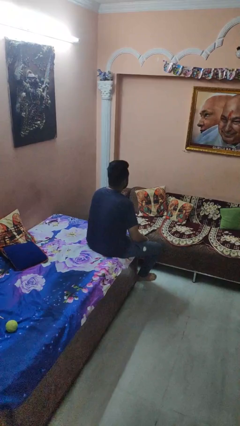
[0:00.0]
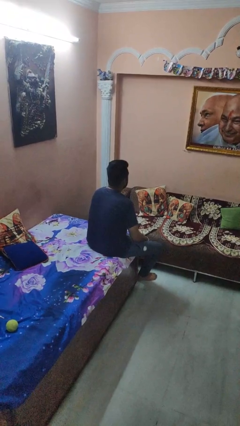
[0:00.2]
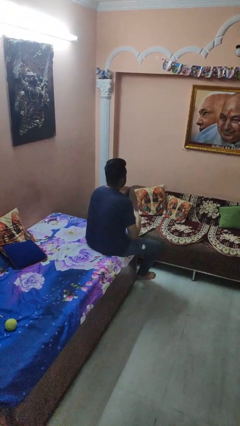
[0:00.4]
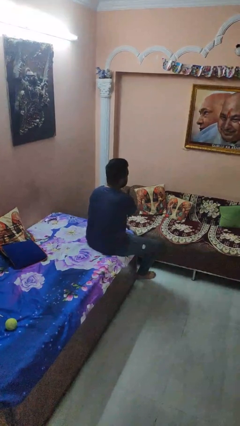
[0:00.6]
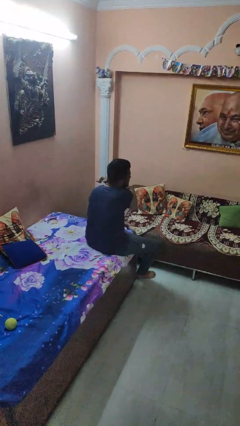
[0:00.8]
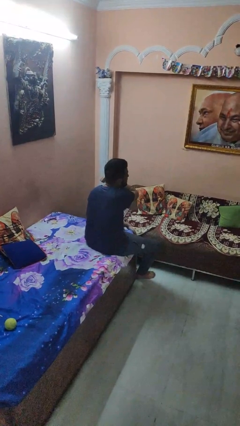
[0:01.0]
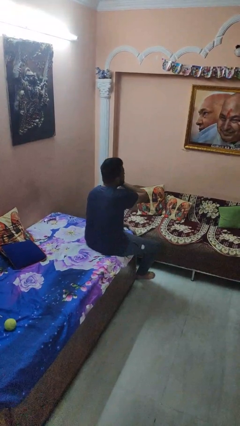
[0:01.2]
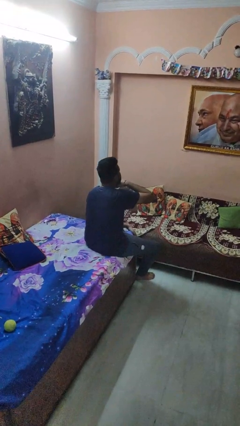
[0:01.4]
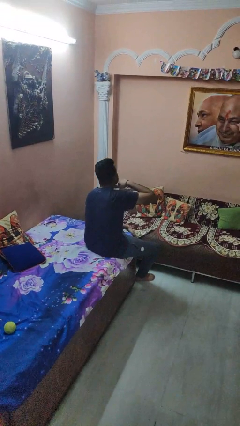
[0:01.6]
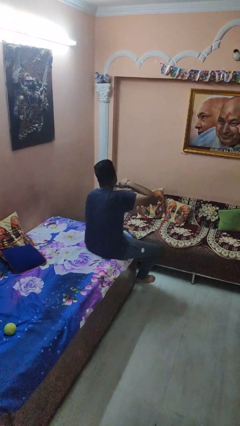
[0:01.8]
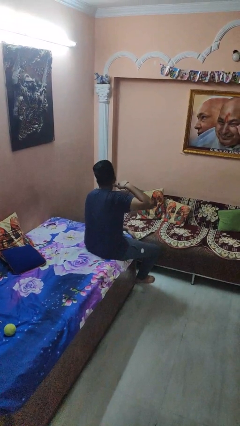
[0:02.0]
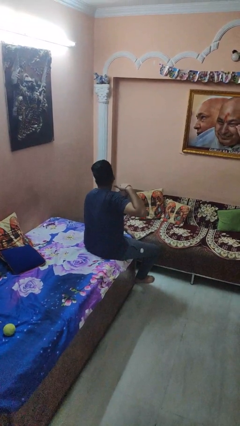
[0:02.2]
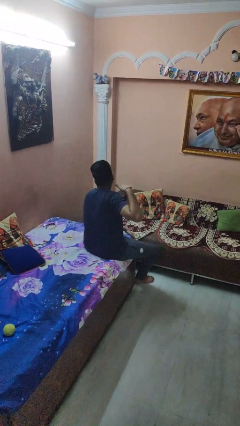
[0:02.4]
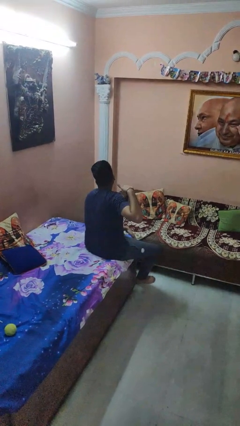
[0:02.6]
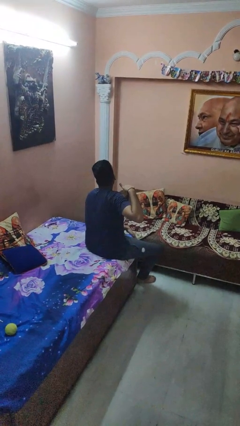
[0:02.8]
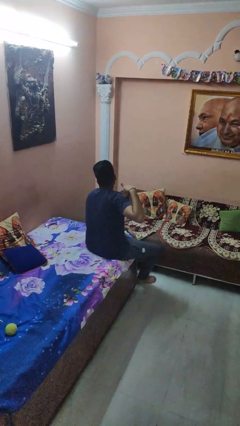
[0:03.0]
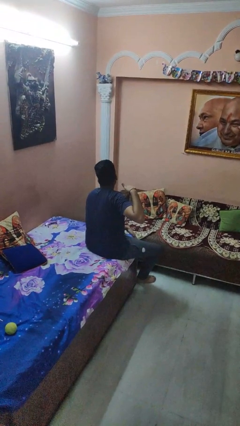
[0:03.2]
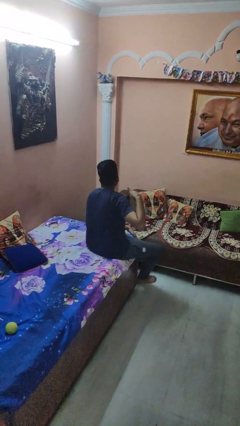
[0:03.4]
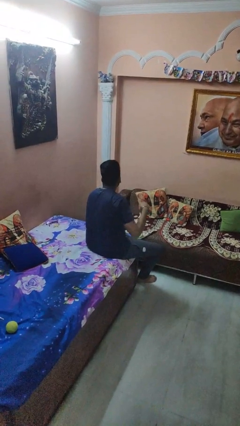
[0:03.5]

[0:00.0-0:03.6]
person gestures cut

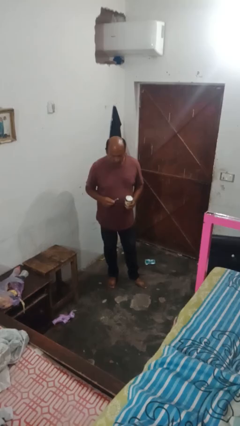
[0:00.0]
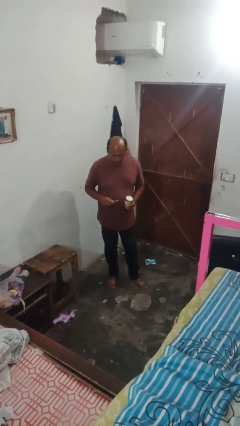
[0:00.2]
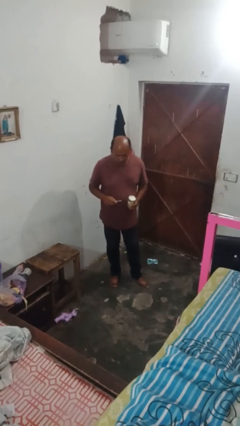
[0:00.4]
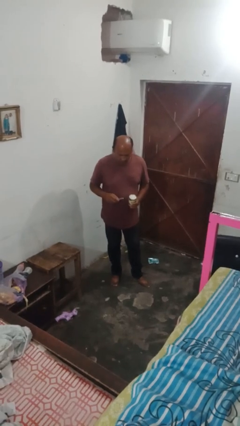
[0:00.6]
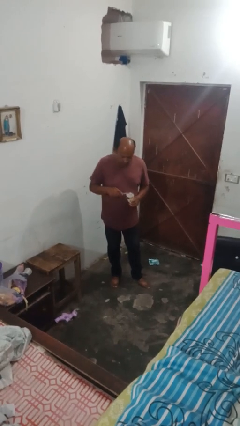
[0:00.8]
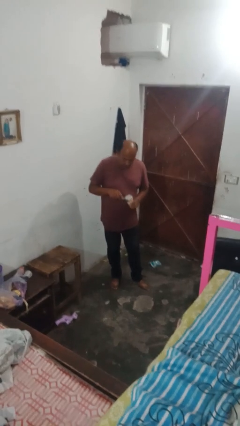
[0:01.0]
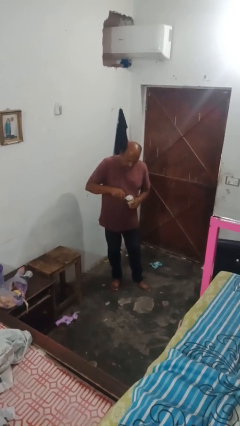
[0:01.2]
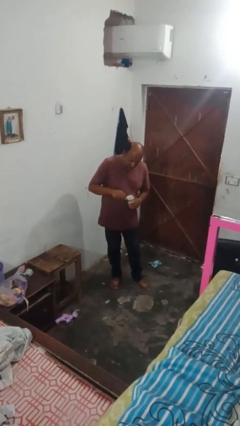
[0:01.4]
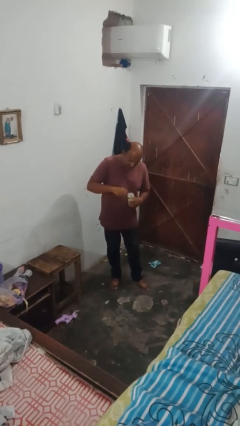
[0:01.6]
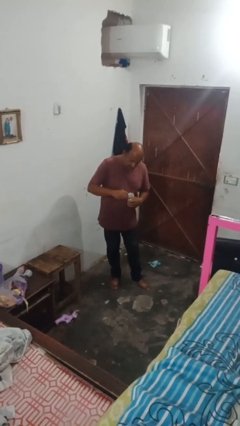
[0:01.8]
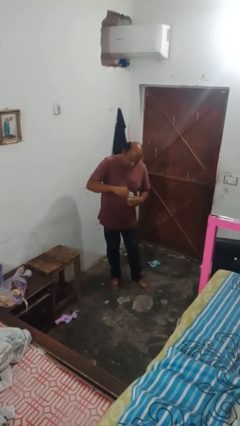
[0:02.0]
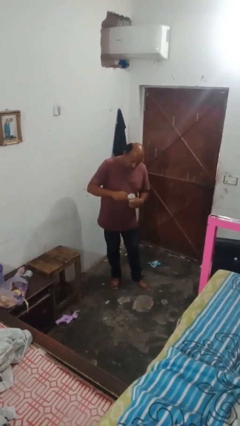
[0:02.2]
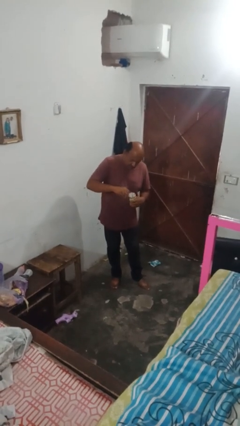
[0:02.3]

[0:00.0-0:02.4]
person opens can with can opener

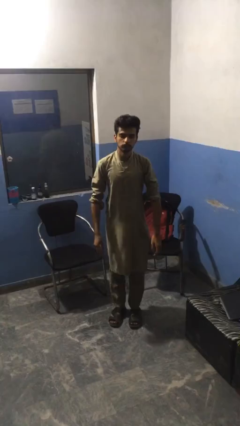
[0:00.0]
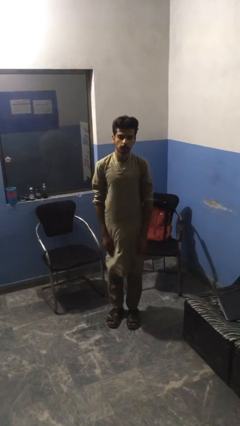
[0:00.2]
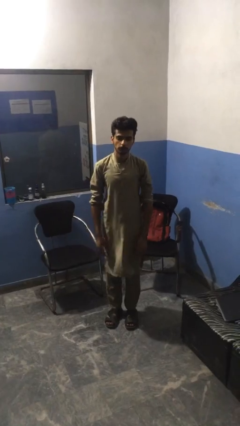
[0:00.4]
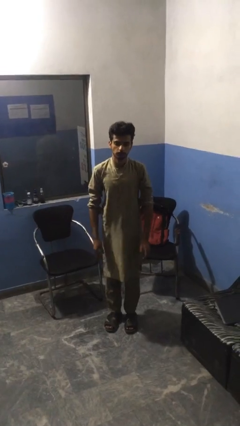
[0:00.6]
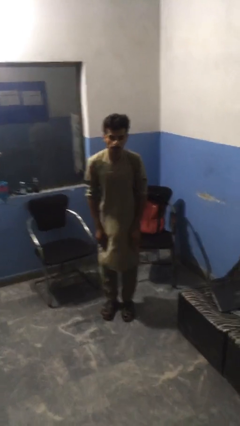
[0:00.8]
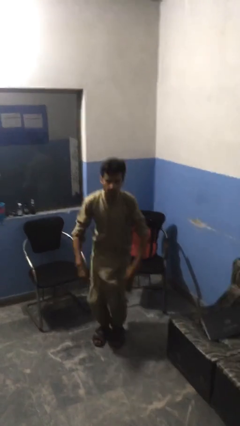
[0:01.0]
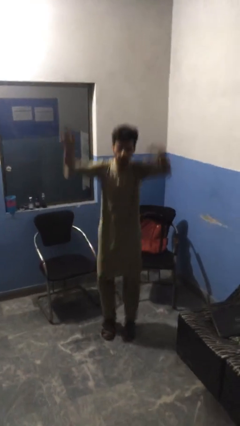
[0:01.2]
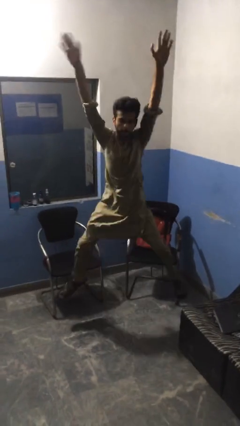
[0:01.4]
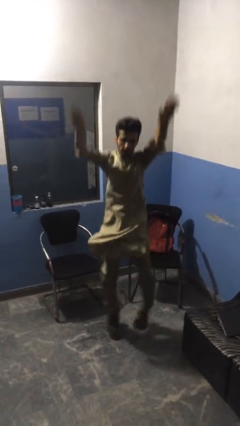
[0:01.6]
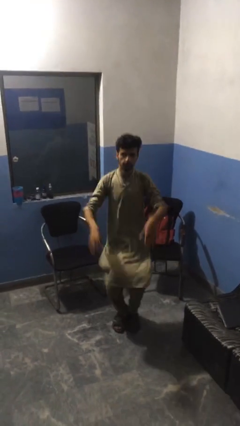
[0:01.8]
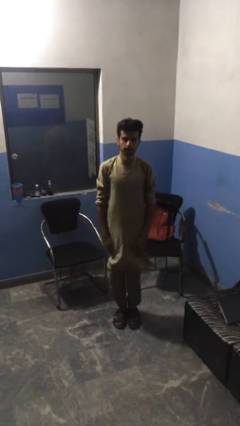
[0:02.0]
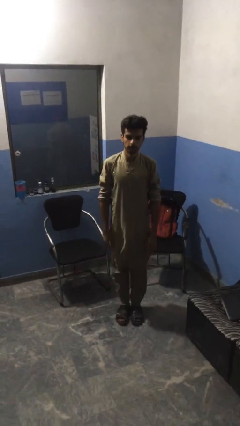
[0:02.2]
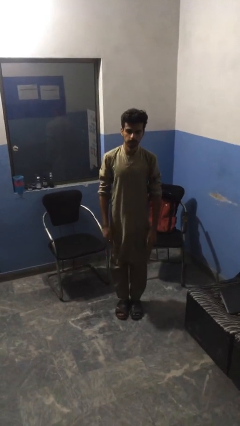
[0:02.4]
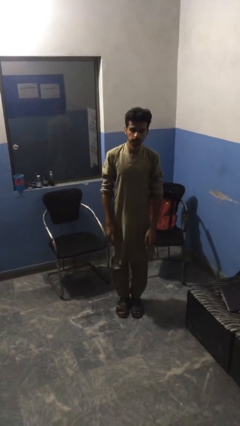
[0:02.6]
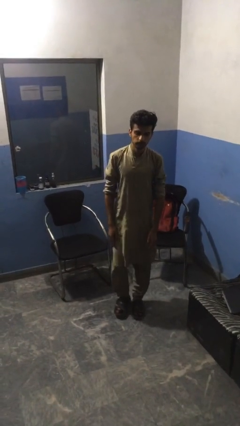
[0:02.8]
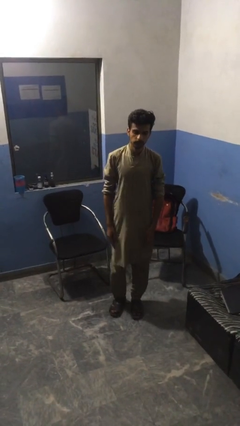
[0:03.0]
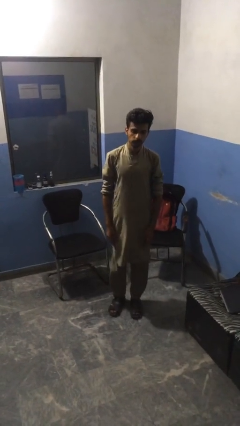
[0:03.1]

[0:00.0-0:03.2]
person exercises with jumping jacks

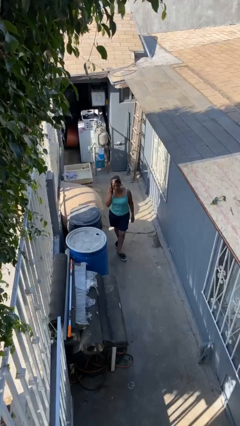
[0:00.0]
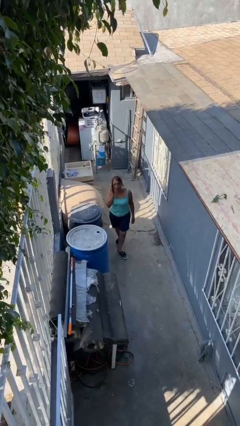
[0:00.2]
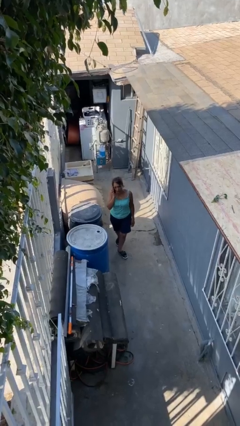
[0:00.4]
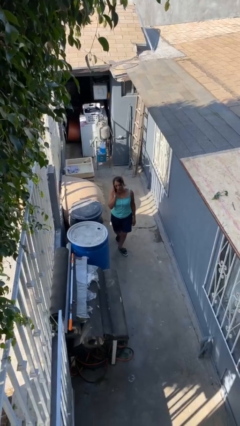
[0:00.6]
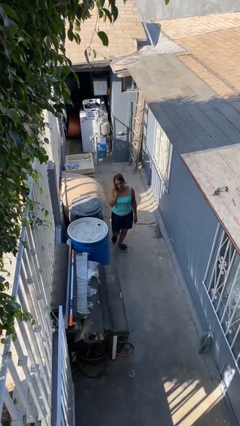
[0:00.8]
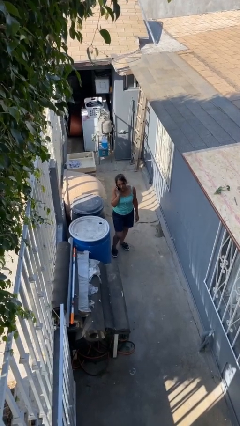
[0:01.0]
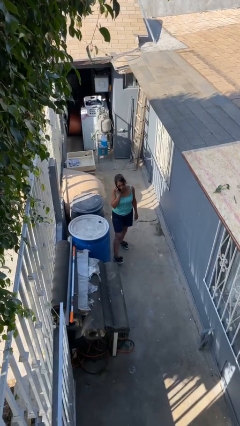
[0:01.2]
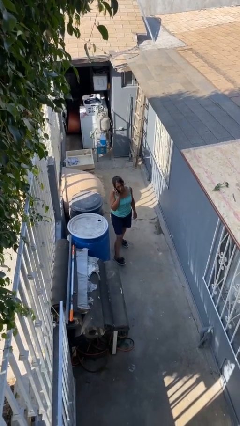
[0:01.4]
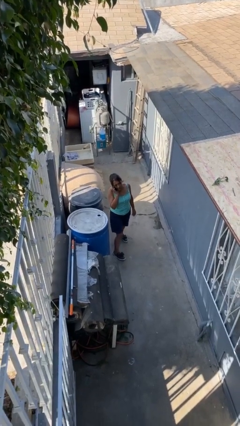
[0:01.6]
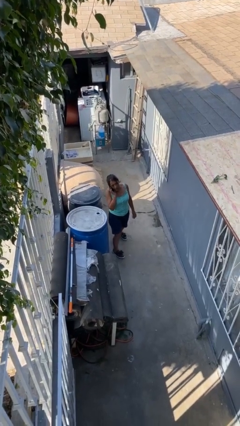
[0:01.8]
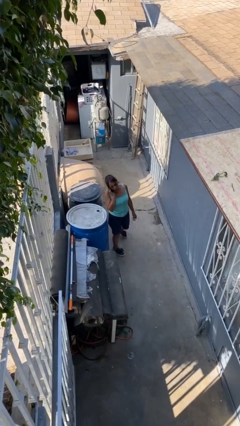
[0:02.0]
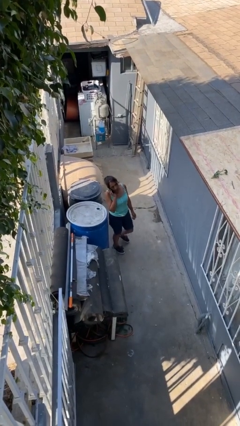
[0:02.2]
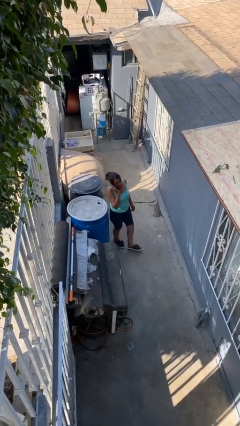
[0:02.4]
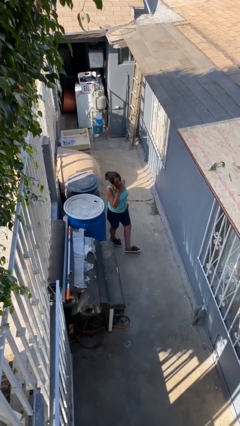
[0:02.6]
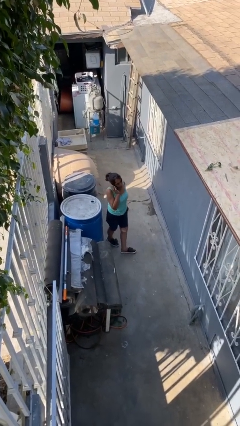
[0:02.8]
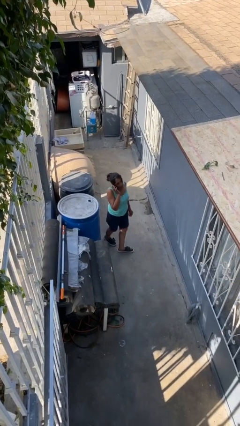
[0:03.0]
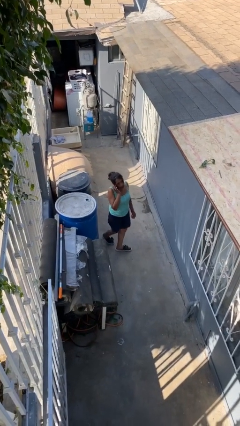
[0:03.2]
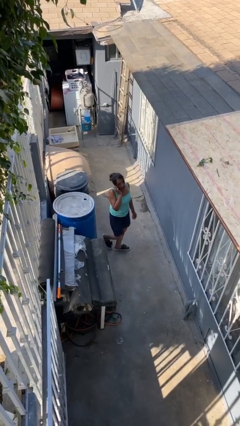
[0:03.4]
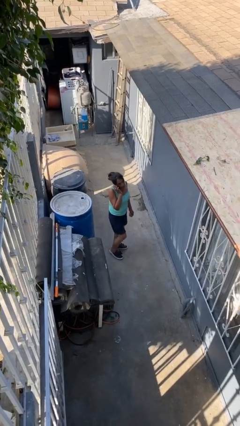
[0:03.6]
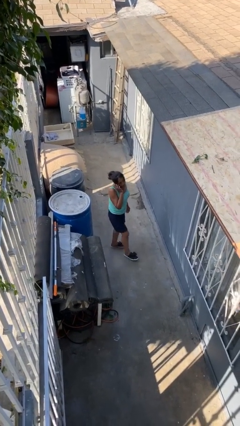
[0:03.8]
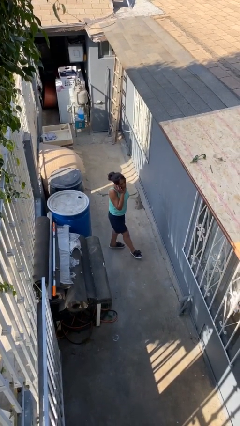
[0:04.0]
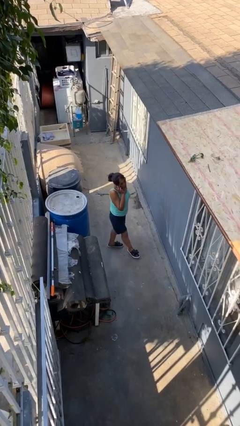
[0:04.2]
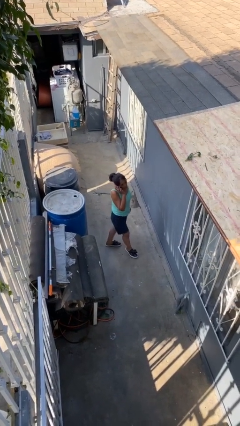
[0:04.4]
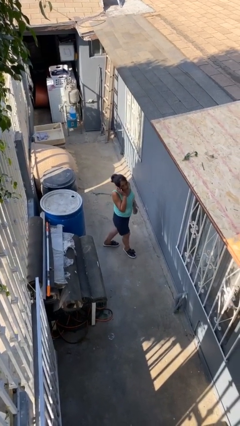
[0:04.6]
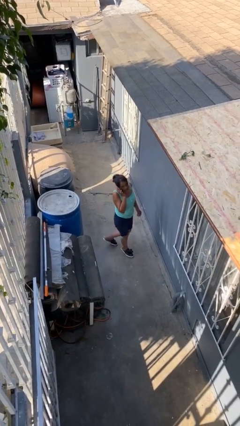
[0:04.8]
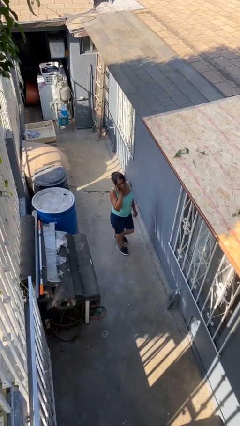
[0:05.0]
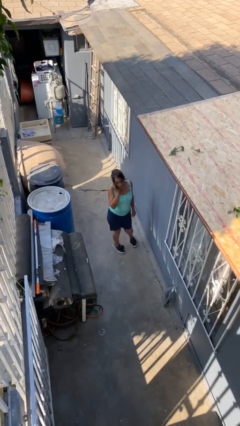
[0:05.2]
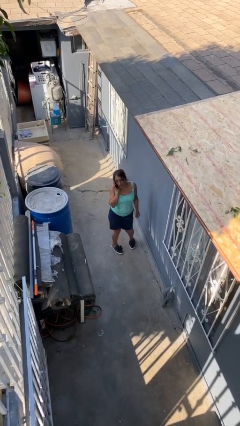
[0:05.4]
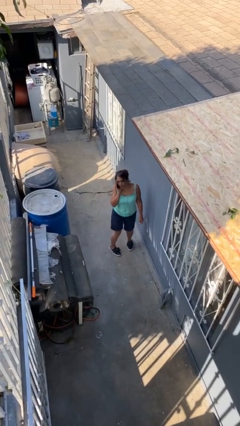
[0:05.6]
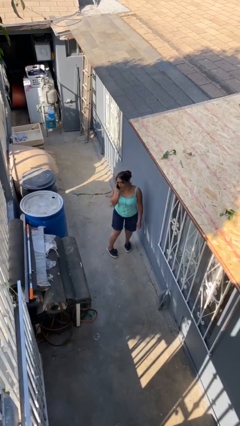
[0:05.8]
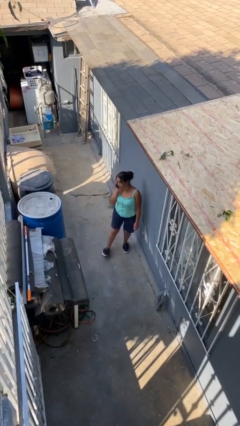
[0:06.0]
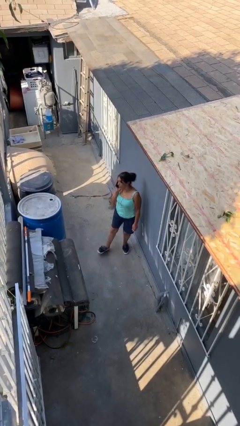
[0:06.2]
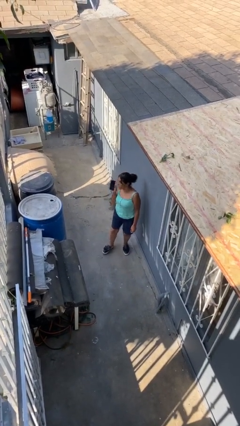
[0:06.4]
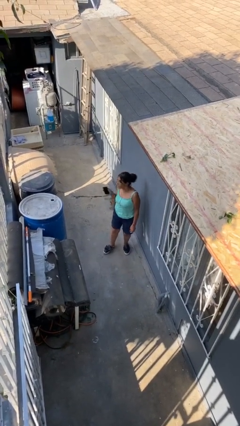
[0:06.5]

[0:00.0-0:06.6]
person talks on phone

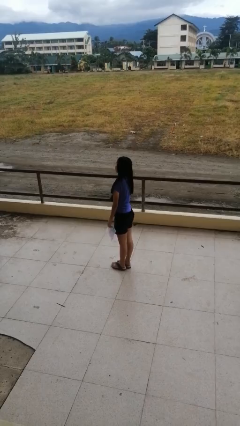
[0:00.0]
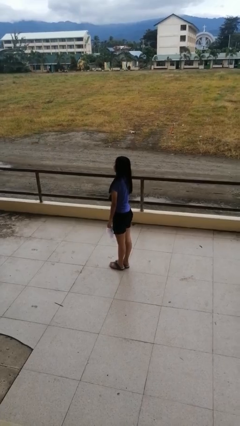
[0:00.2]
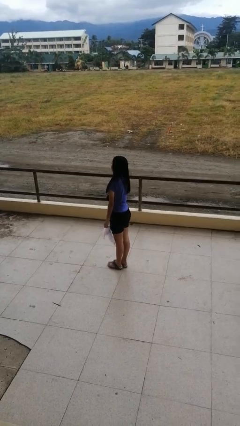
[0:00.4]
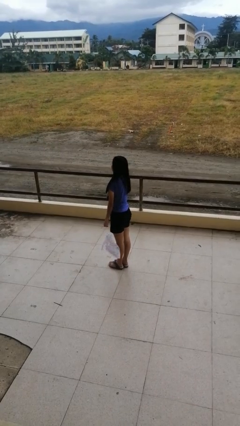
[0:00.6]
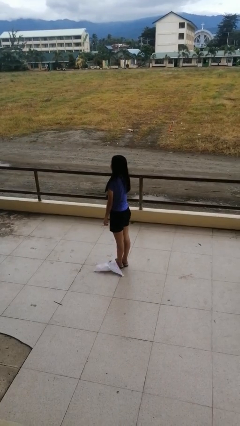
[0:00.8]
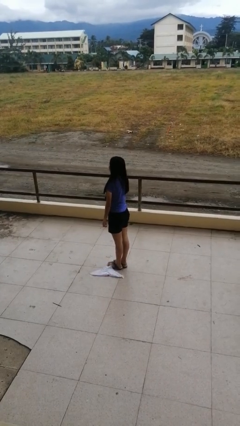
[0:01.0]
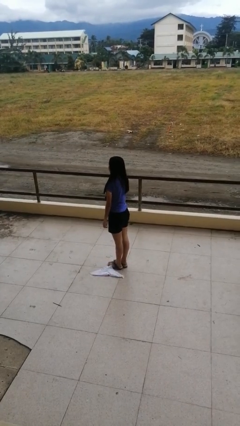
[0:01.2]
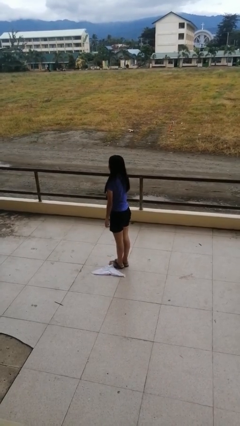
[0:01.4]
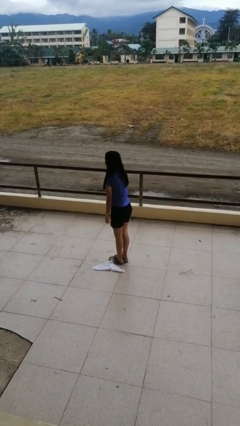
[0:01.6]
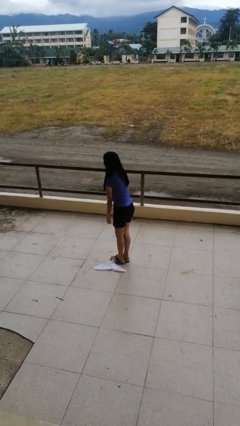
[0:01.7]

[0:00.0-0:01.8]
person drops object

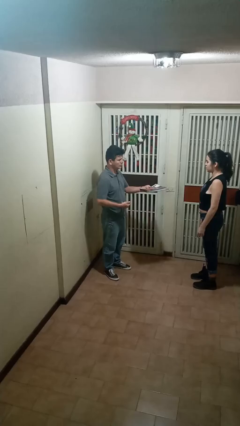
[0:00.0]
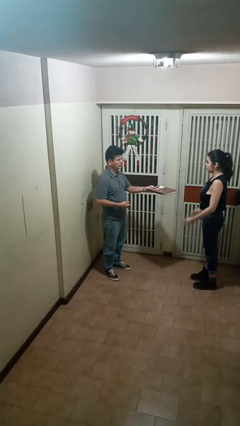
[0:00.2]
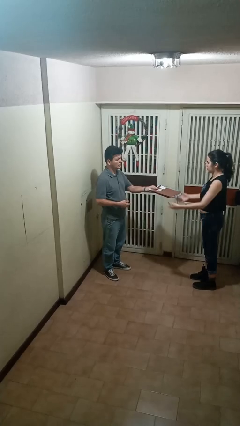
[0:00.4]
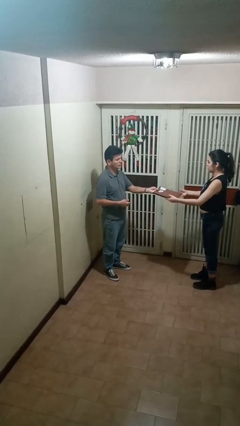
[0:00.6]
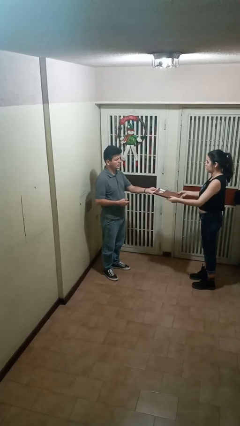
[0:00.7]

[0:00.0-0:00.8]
person transfers object to person
